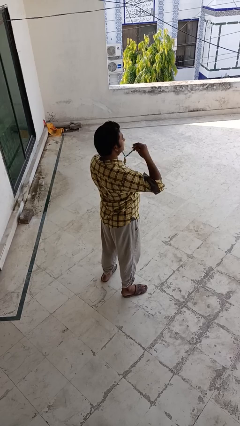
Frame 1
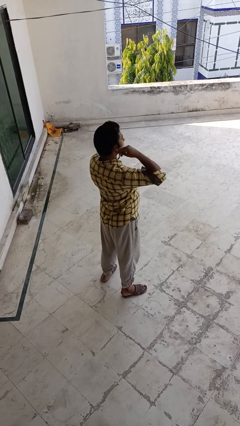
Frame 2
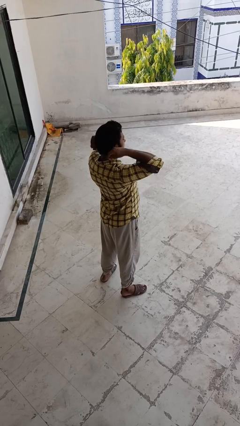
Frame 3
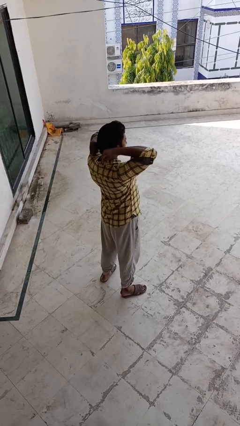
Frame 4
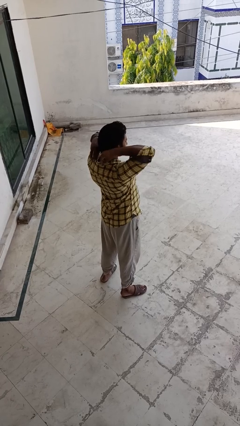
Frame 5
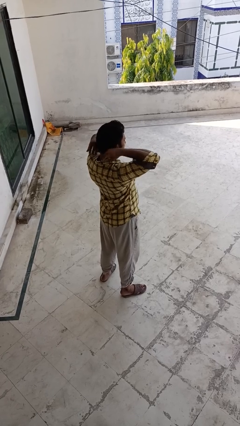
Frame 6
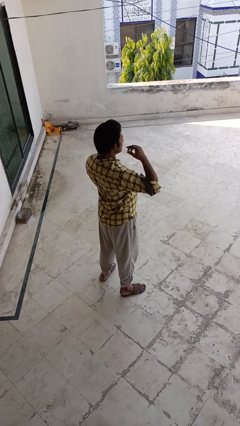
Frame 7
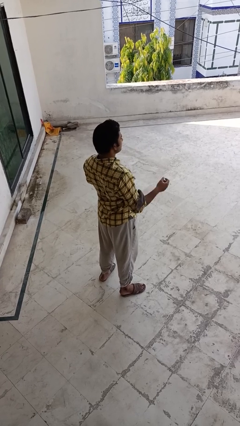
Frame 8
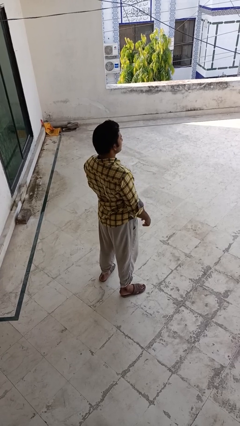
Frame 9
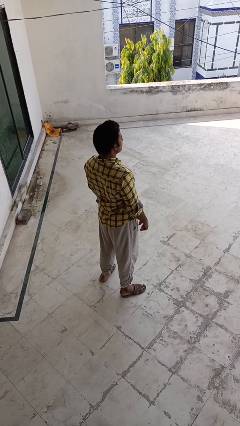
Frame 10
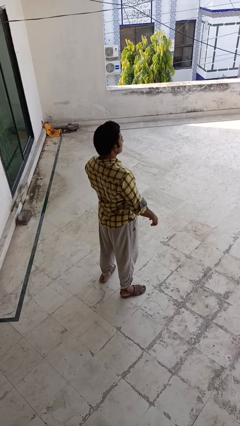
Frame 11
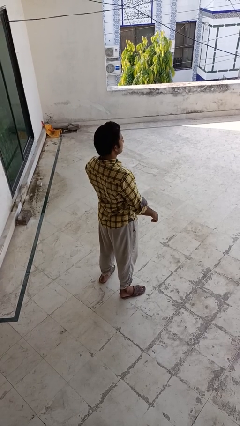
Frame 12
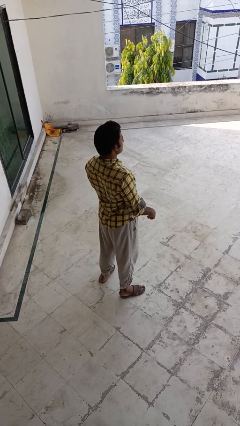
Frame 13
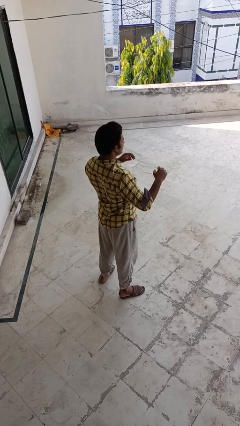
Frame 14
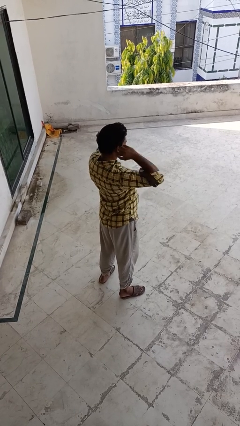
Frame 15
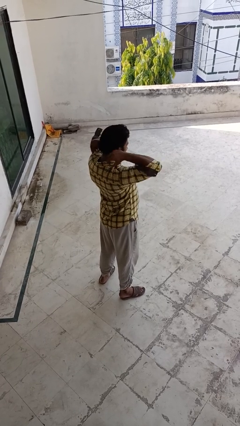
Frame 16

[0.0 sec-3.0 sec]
person puts on necklace

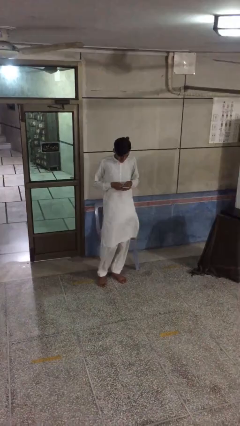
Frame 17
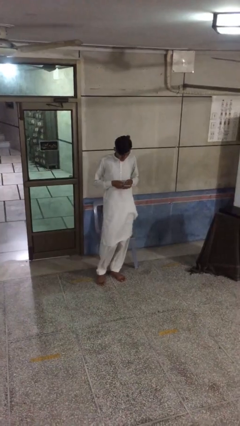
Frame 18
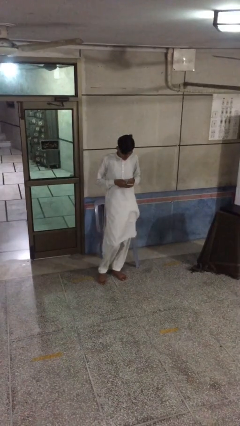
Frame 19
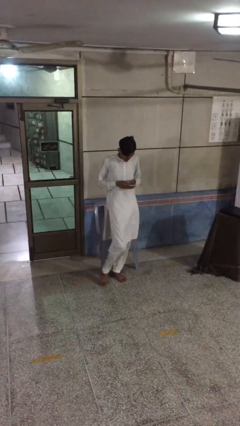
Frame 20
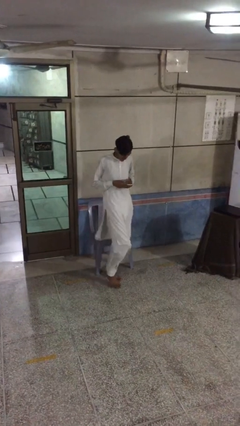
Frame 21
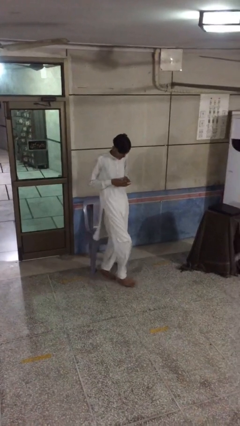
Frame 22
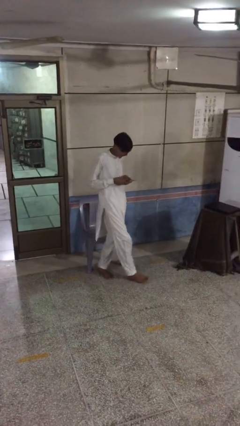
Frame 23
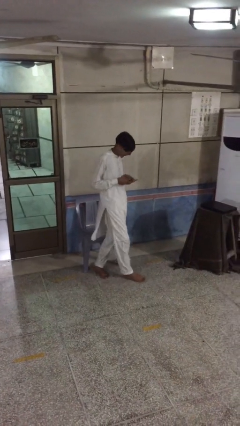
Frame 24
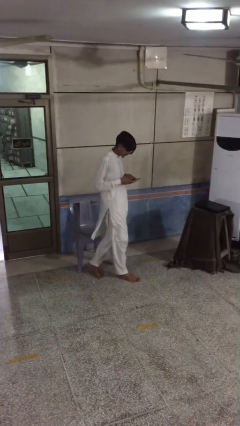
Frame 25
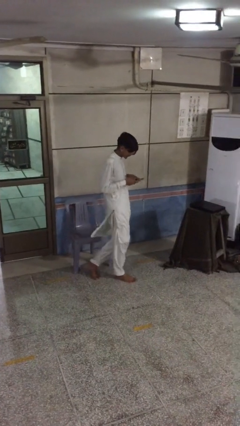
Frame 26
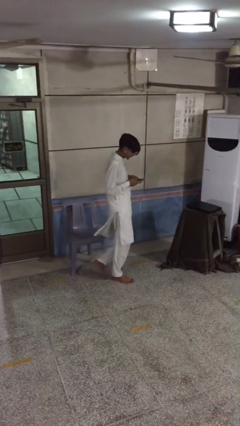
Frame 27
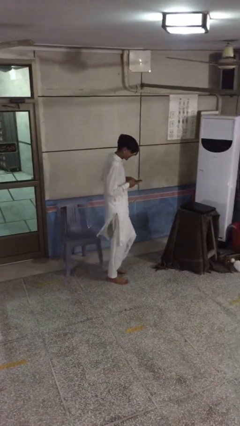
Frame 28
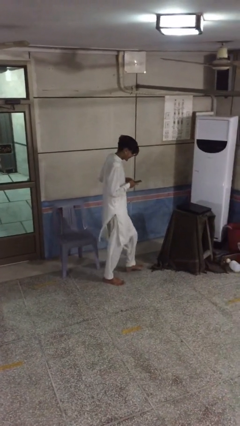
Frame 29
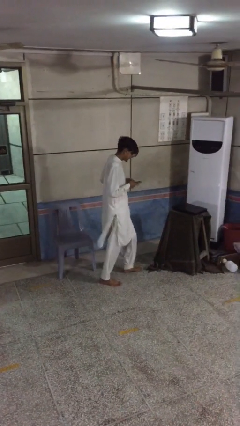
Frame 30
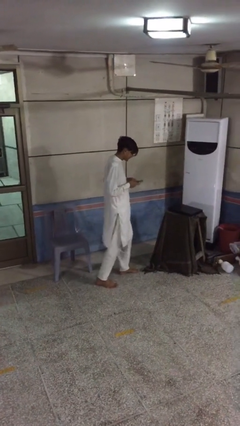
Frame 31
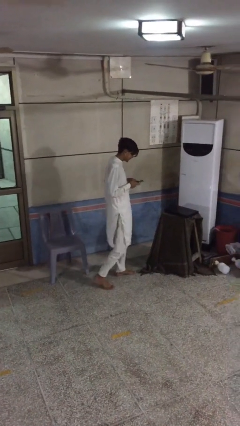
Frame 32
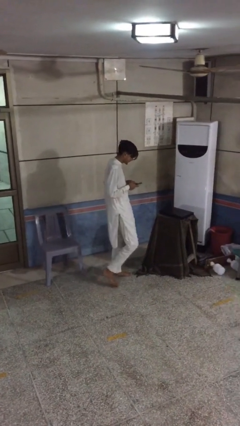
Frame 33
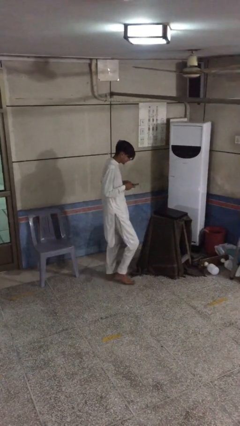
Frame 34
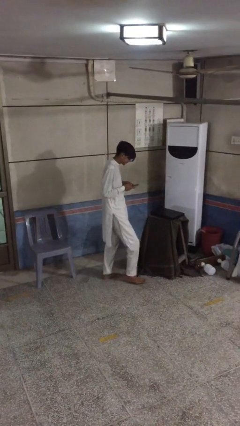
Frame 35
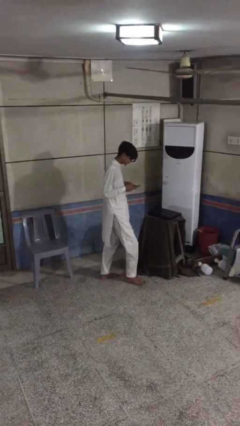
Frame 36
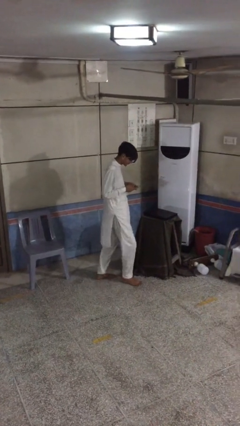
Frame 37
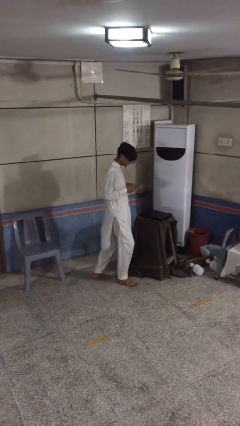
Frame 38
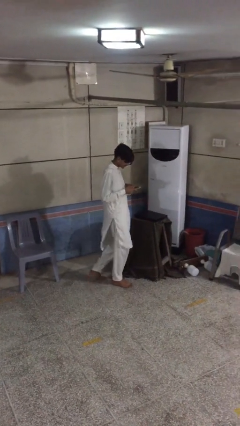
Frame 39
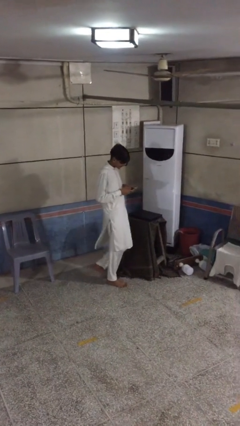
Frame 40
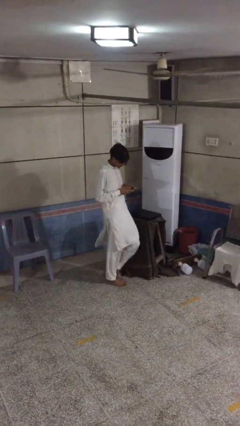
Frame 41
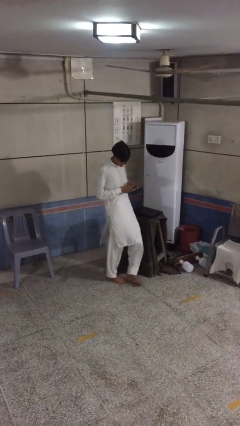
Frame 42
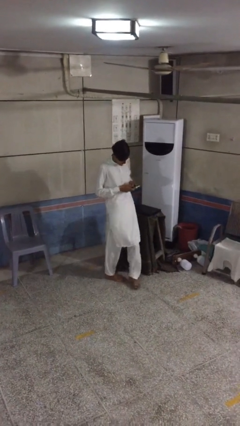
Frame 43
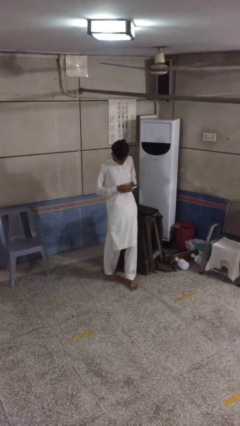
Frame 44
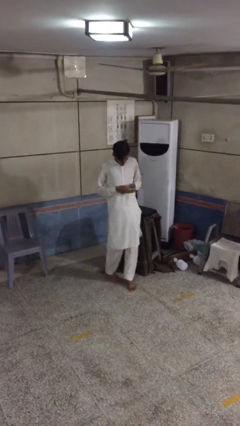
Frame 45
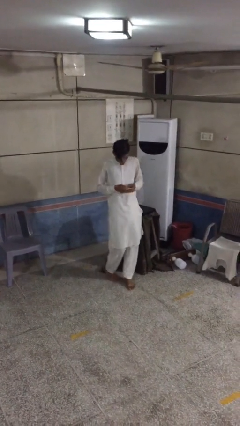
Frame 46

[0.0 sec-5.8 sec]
person texts on phone

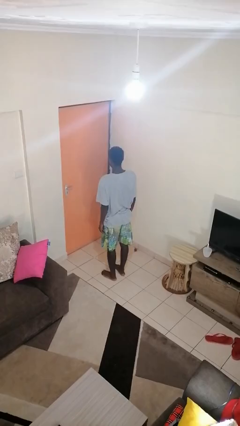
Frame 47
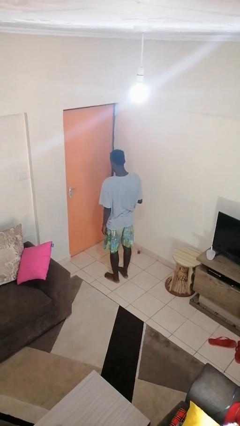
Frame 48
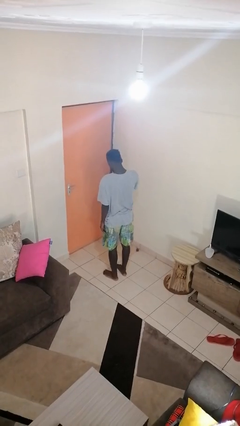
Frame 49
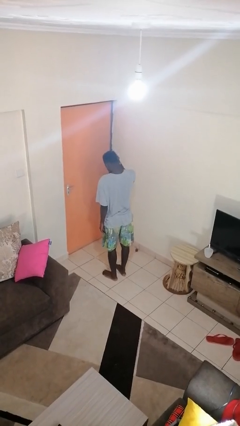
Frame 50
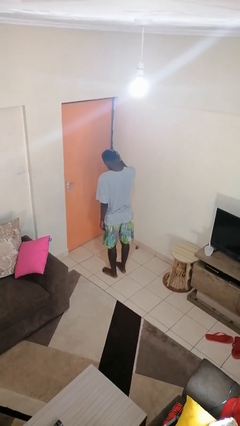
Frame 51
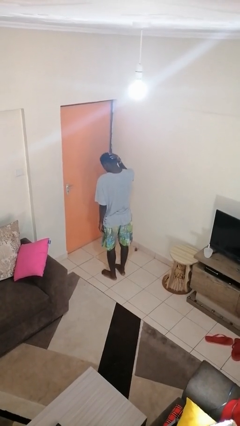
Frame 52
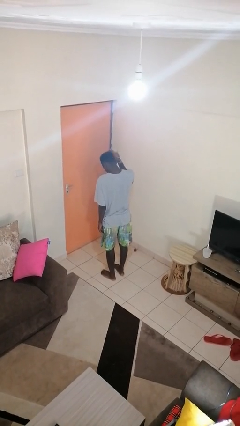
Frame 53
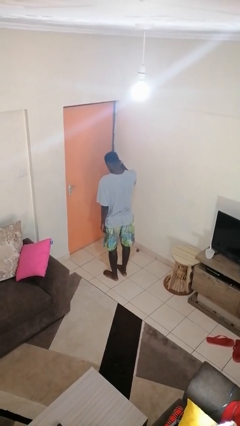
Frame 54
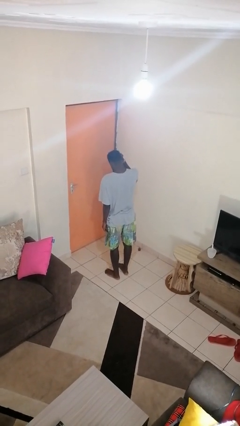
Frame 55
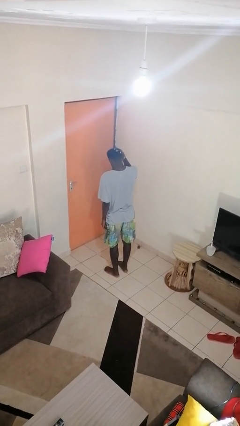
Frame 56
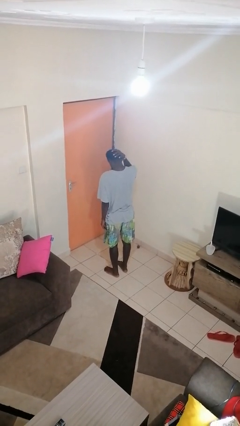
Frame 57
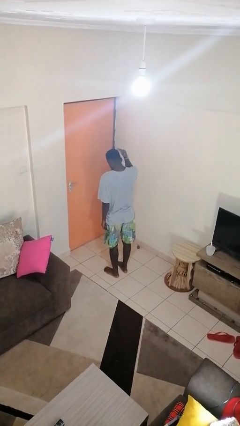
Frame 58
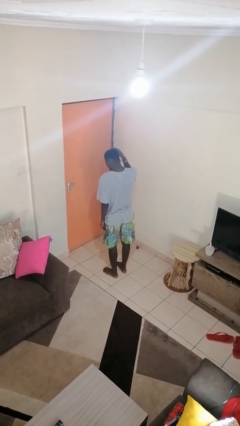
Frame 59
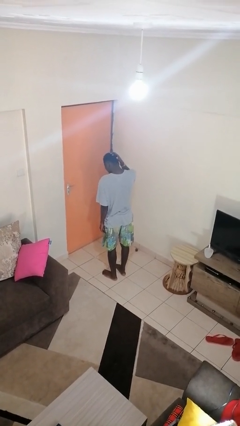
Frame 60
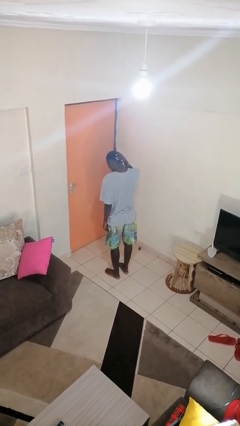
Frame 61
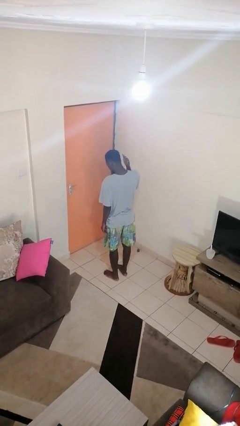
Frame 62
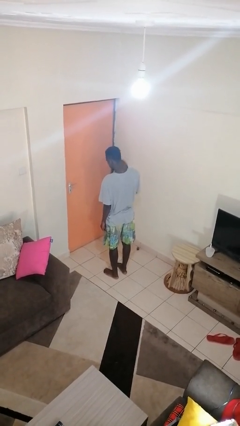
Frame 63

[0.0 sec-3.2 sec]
person strokes hair

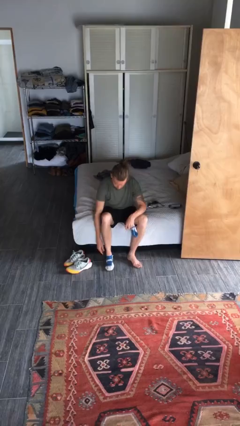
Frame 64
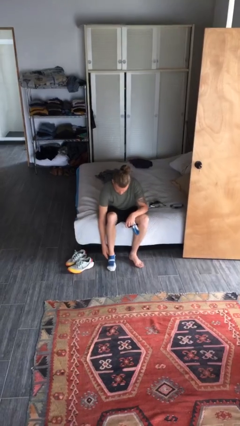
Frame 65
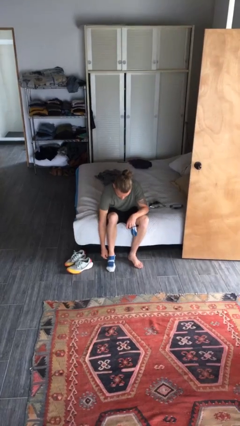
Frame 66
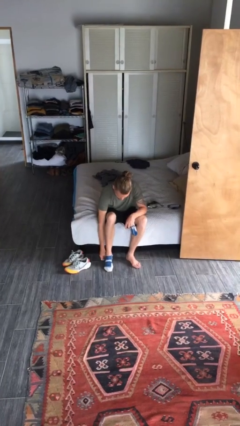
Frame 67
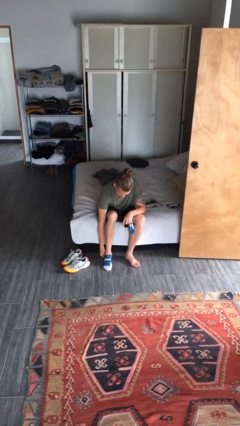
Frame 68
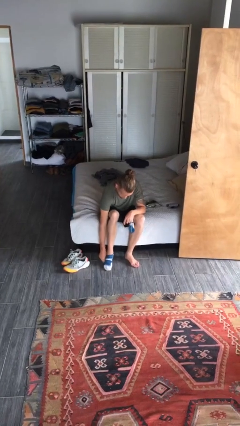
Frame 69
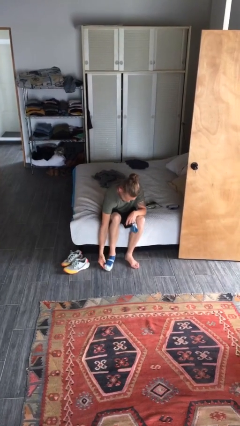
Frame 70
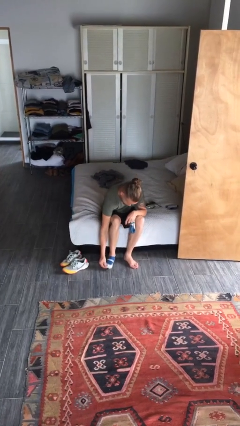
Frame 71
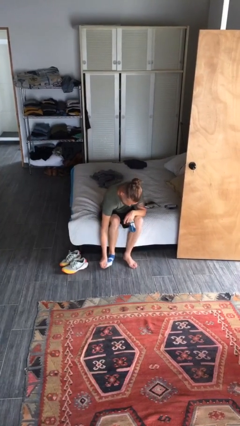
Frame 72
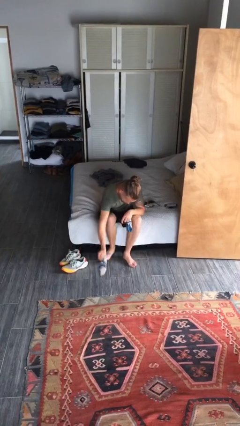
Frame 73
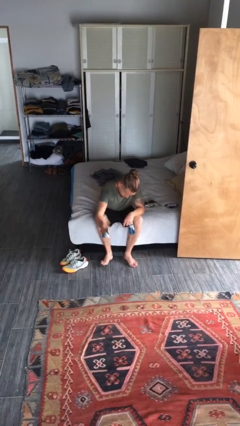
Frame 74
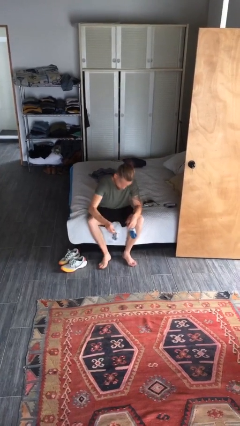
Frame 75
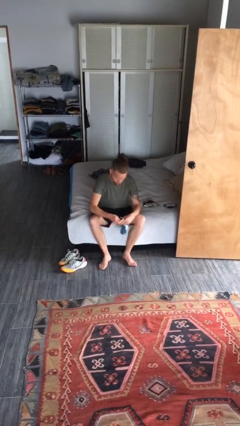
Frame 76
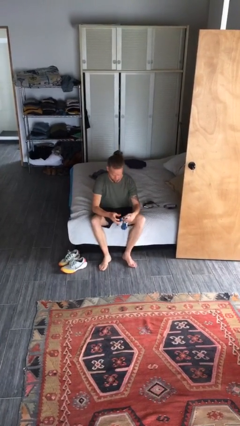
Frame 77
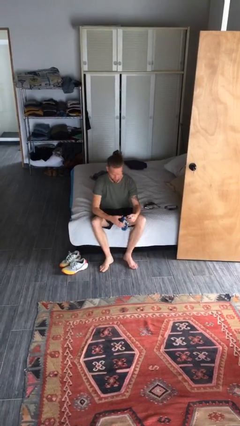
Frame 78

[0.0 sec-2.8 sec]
person takes off socks

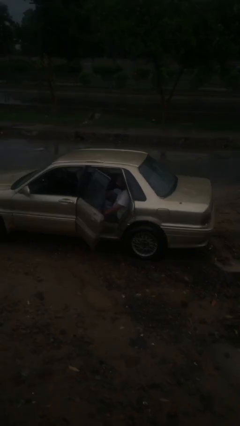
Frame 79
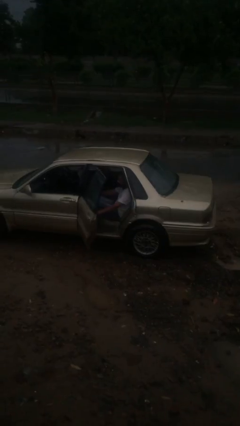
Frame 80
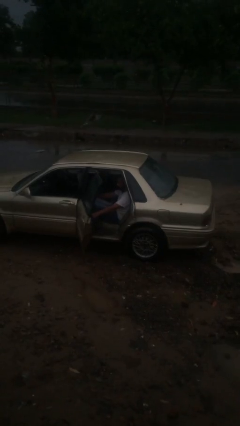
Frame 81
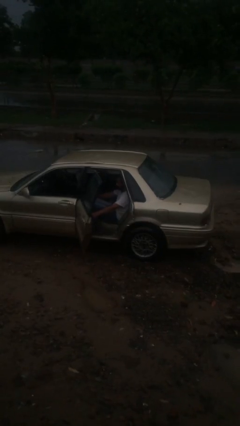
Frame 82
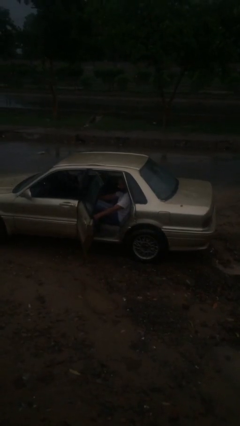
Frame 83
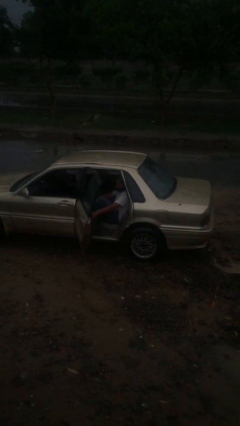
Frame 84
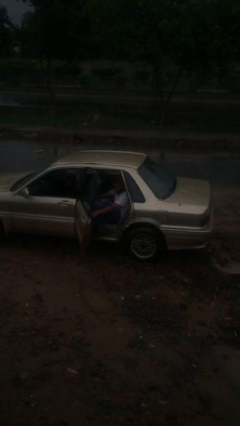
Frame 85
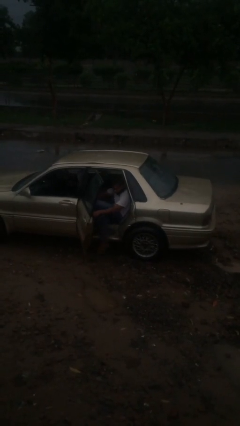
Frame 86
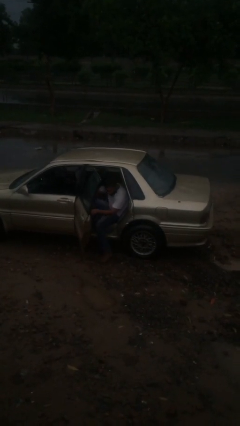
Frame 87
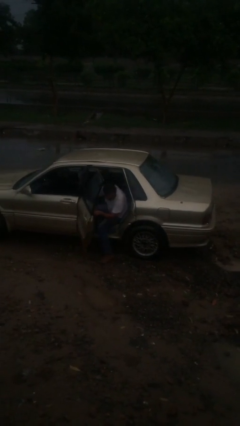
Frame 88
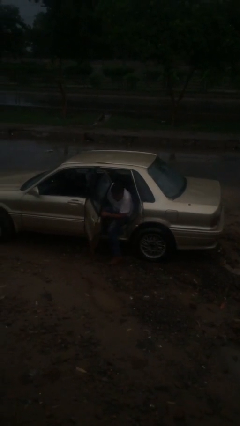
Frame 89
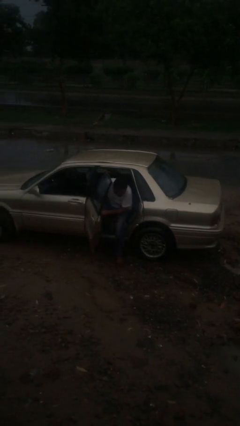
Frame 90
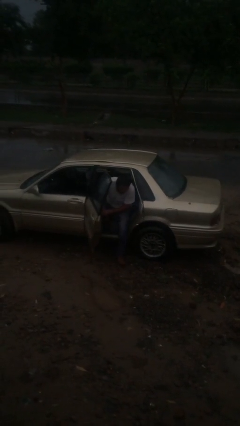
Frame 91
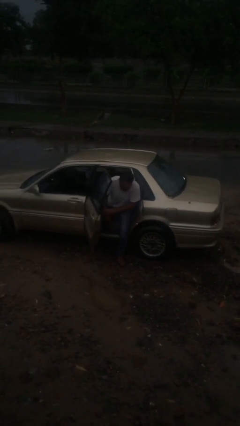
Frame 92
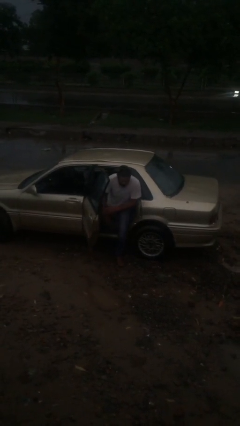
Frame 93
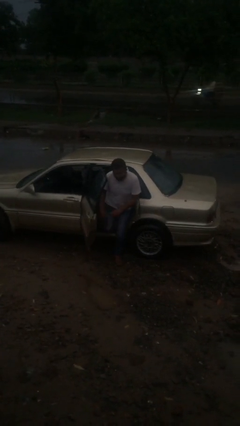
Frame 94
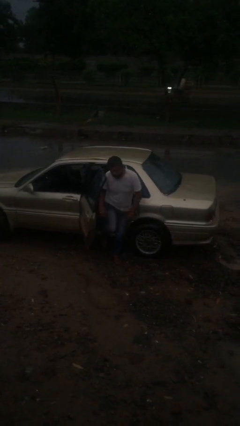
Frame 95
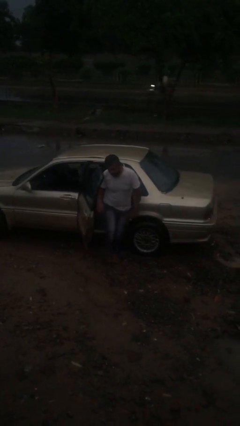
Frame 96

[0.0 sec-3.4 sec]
person exits car
